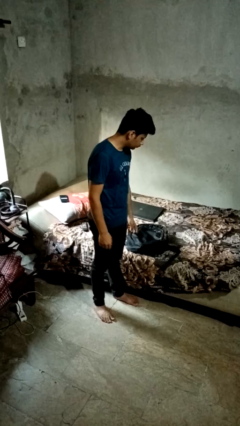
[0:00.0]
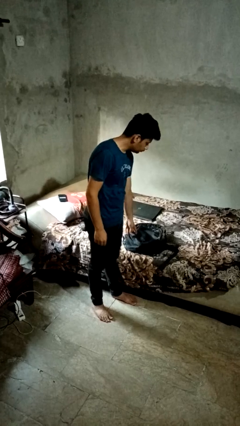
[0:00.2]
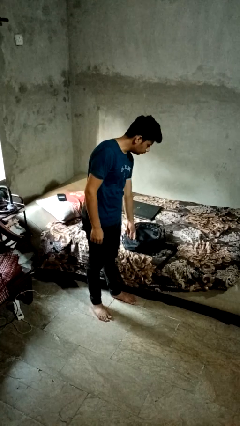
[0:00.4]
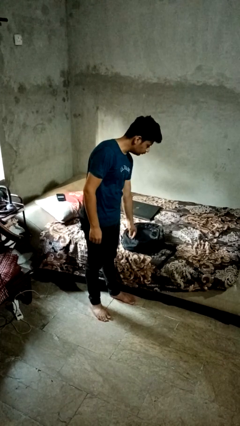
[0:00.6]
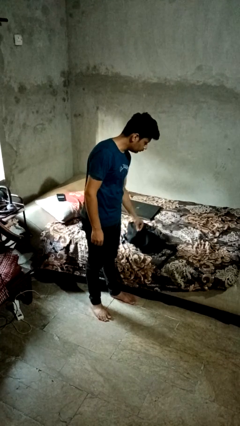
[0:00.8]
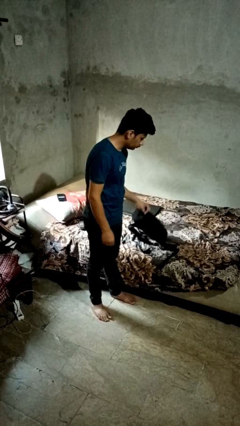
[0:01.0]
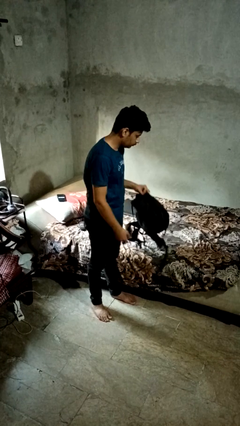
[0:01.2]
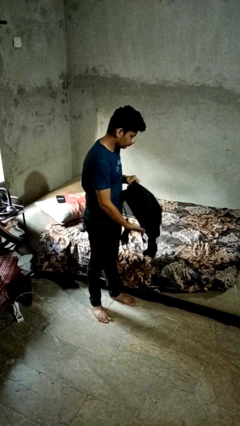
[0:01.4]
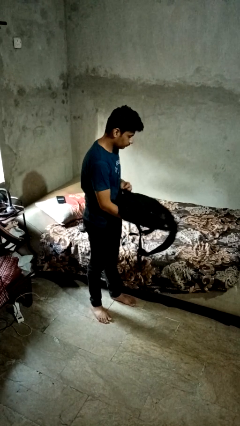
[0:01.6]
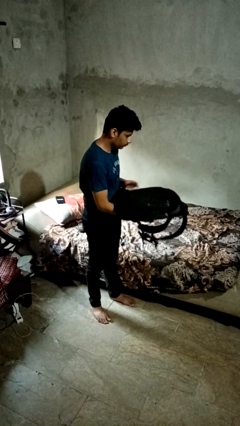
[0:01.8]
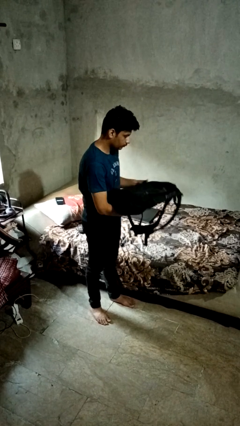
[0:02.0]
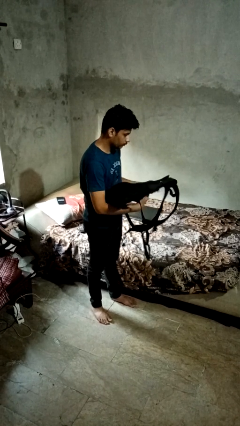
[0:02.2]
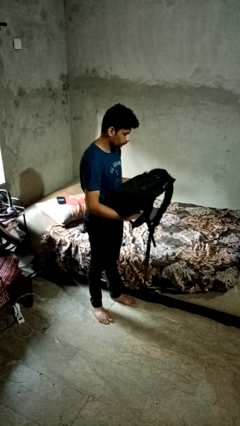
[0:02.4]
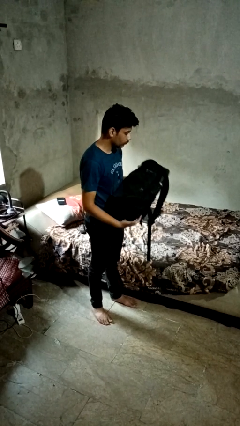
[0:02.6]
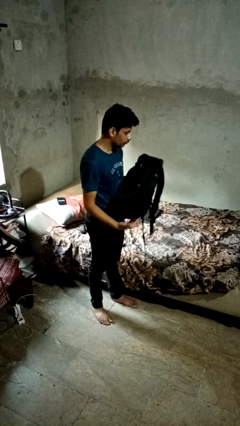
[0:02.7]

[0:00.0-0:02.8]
person picks up object from bed

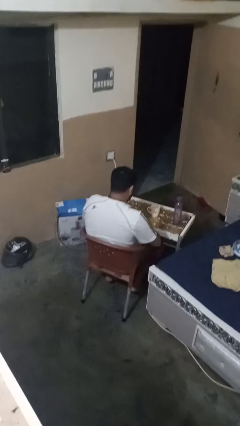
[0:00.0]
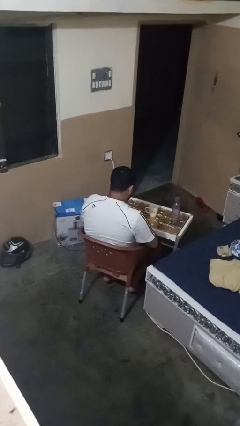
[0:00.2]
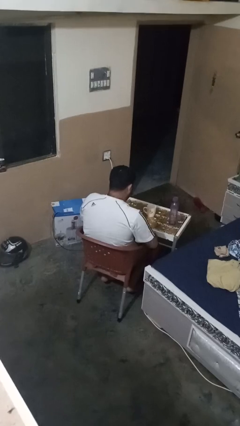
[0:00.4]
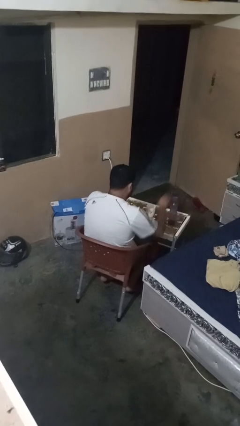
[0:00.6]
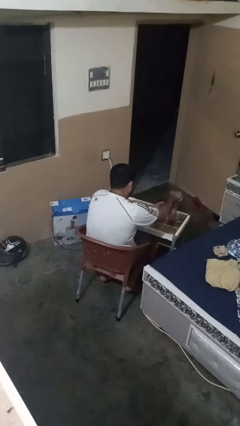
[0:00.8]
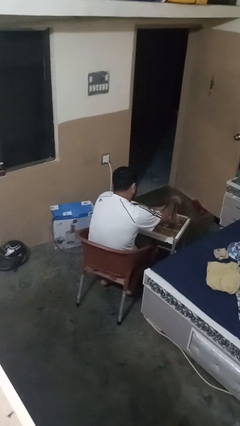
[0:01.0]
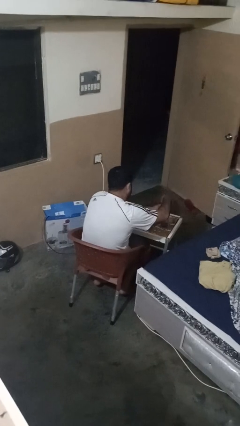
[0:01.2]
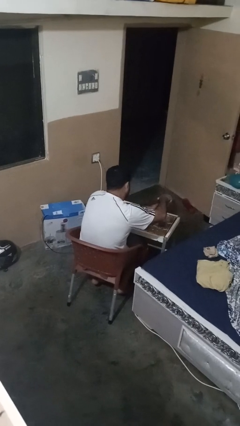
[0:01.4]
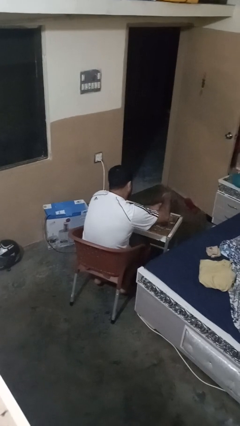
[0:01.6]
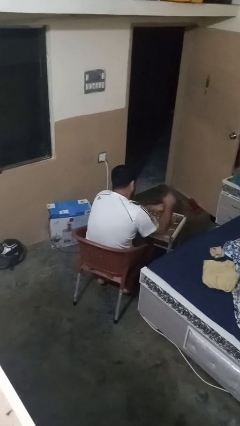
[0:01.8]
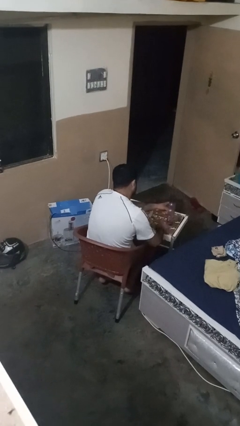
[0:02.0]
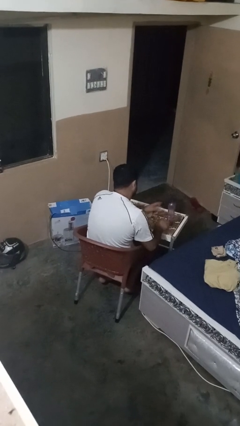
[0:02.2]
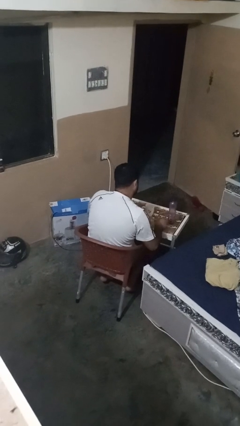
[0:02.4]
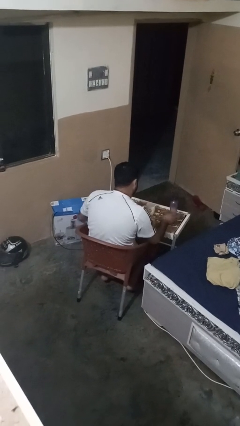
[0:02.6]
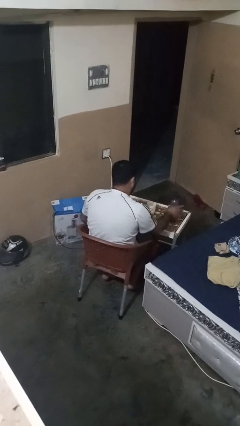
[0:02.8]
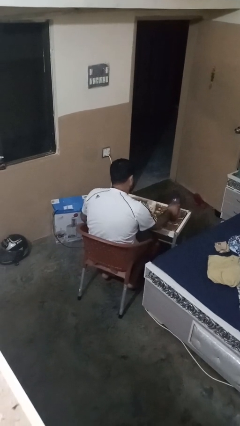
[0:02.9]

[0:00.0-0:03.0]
person unscrews lid from bottle

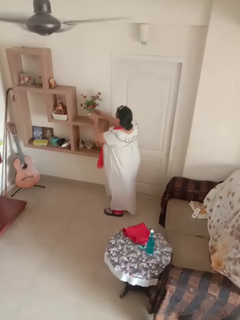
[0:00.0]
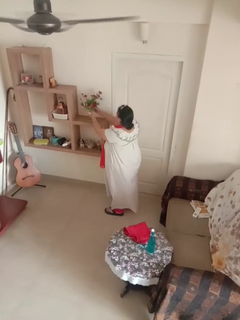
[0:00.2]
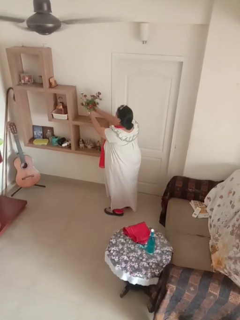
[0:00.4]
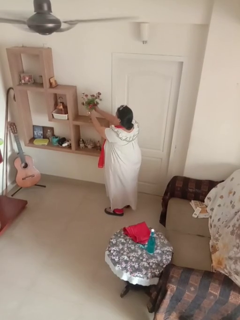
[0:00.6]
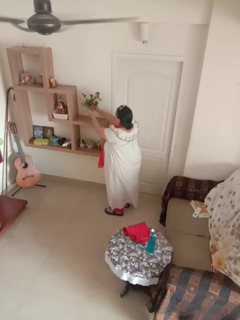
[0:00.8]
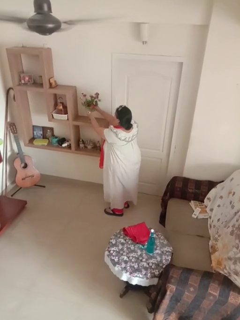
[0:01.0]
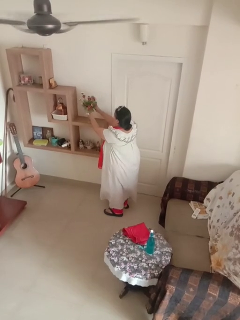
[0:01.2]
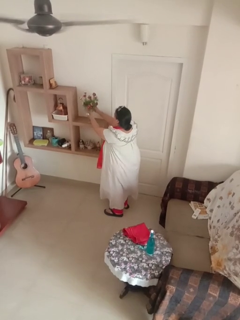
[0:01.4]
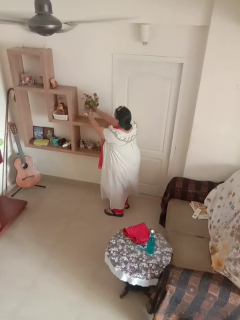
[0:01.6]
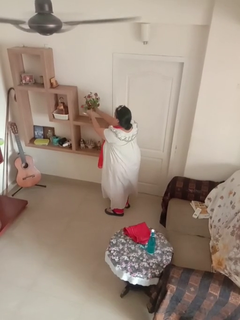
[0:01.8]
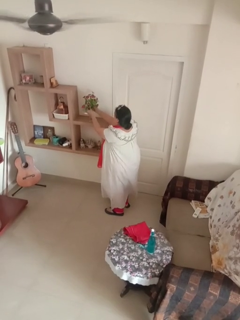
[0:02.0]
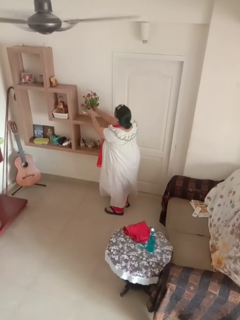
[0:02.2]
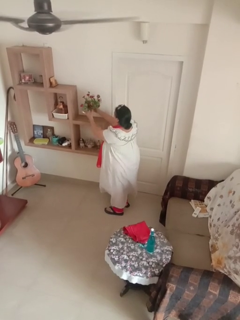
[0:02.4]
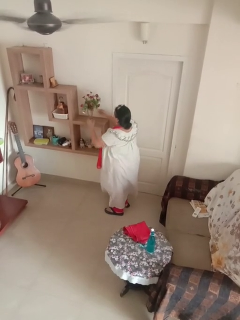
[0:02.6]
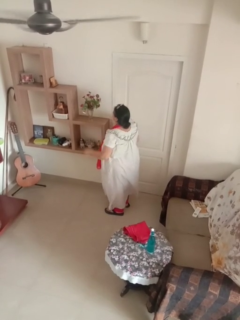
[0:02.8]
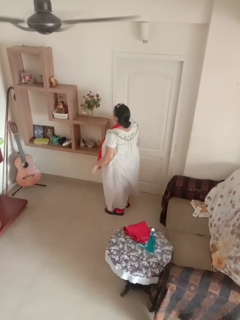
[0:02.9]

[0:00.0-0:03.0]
person arranges flowers in vase

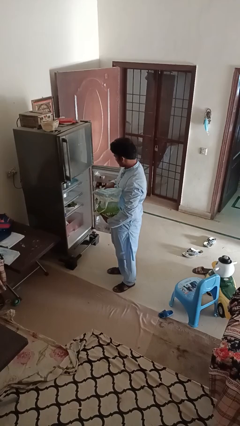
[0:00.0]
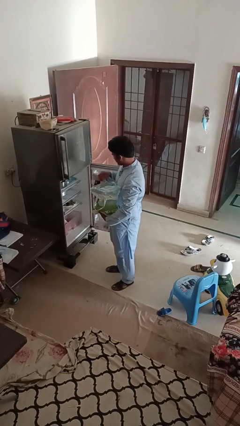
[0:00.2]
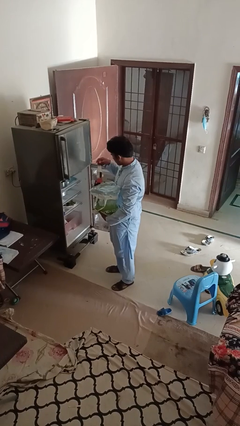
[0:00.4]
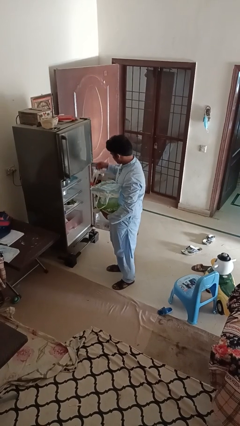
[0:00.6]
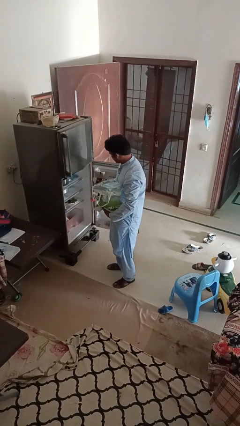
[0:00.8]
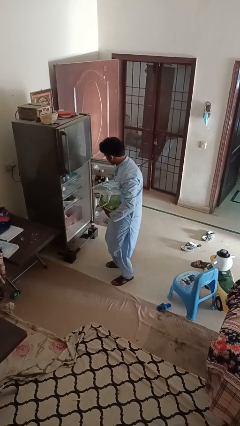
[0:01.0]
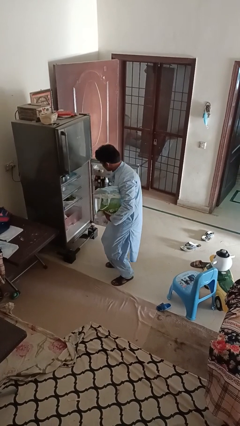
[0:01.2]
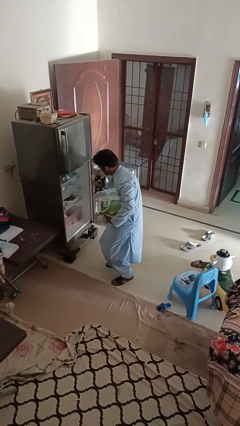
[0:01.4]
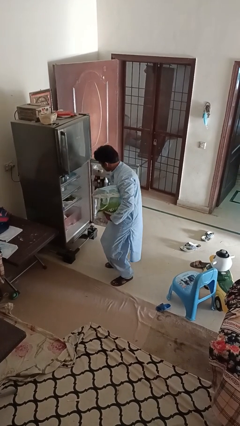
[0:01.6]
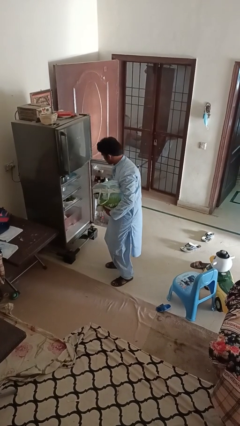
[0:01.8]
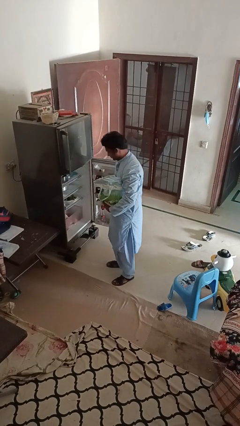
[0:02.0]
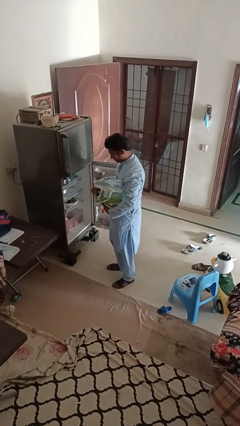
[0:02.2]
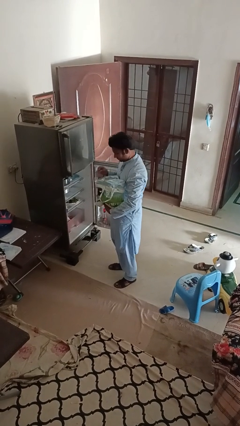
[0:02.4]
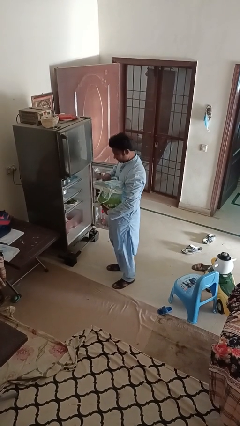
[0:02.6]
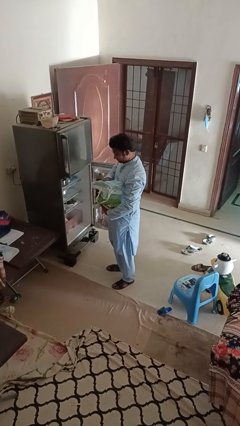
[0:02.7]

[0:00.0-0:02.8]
person loads groceries into refrigerator

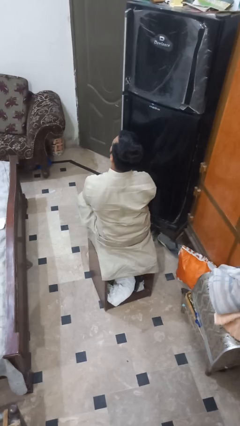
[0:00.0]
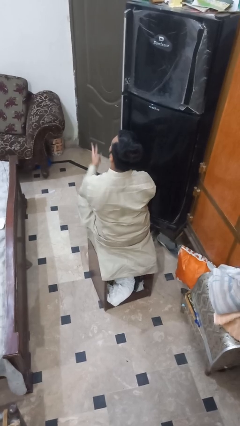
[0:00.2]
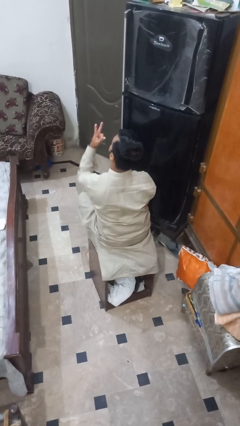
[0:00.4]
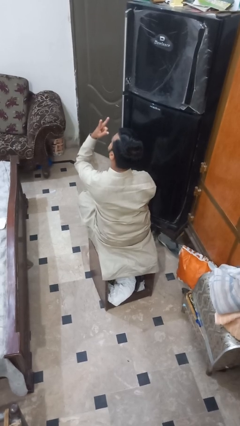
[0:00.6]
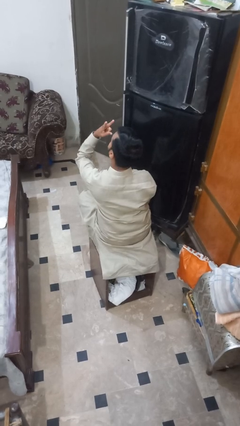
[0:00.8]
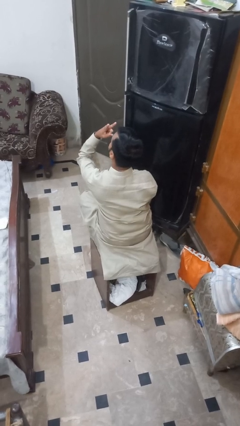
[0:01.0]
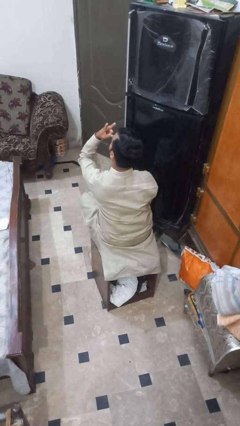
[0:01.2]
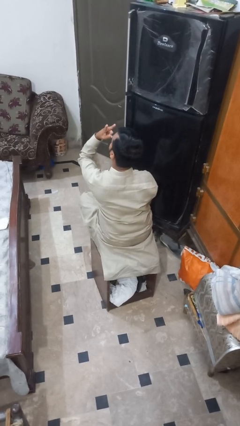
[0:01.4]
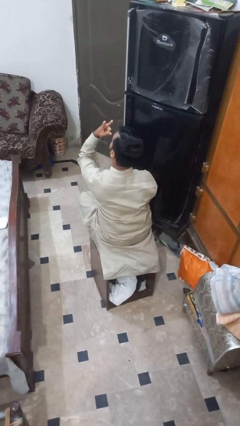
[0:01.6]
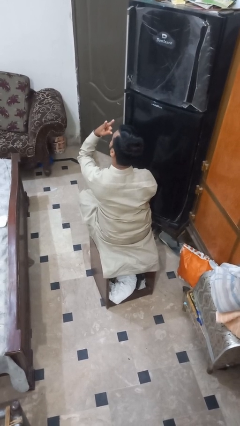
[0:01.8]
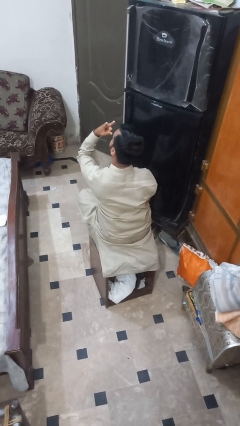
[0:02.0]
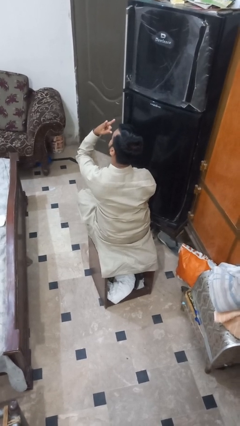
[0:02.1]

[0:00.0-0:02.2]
person gestures watch closely

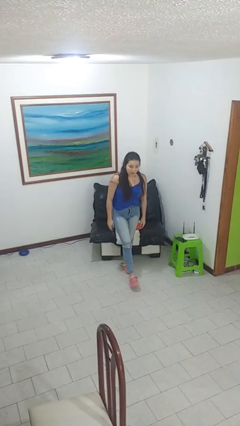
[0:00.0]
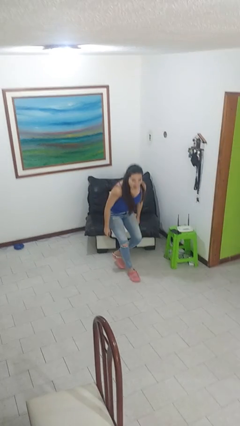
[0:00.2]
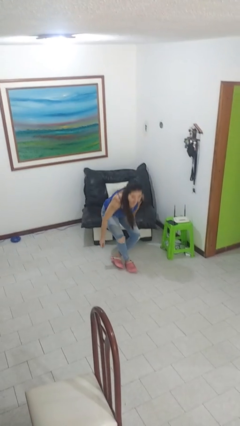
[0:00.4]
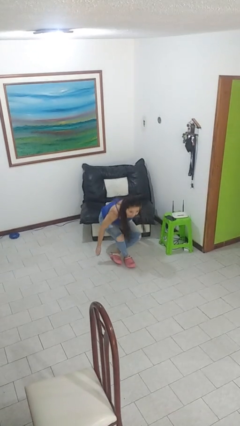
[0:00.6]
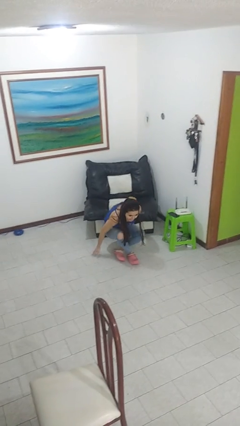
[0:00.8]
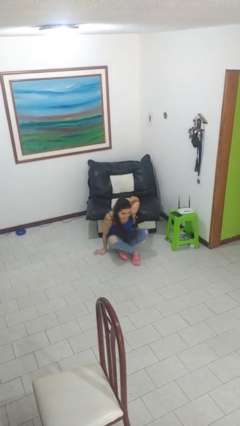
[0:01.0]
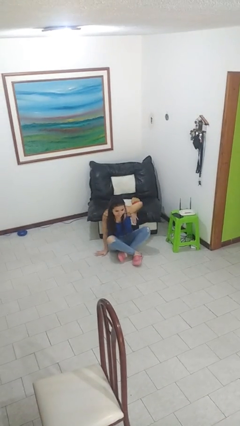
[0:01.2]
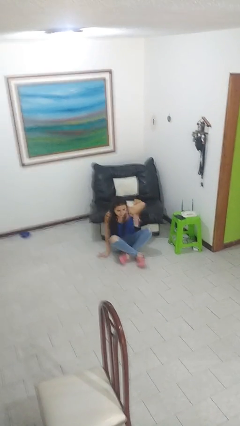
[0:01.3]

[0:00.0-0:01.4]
person sits crisscross

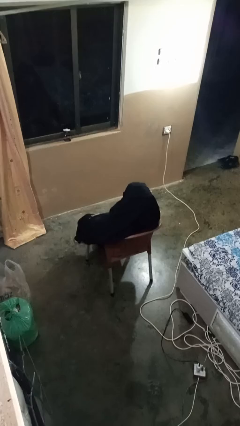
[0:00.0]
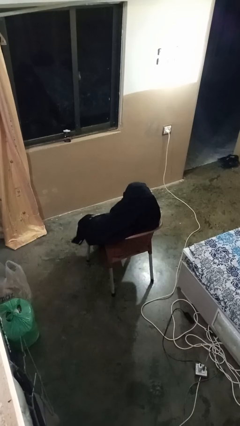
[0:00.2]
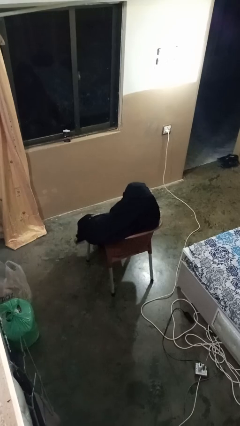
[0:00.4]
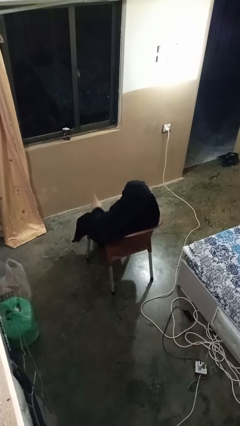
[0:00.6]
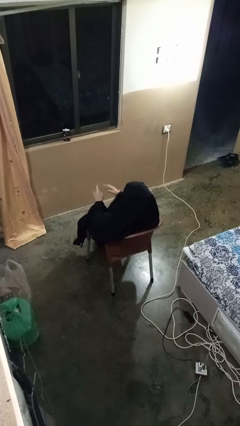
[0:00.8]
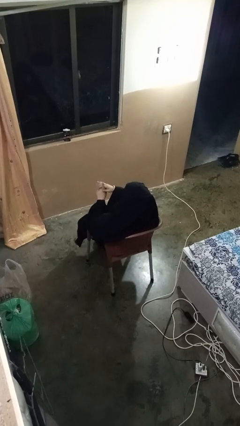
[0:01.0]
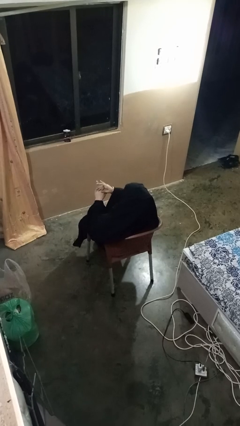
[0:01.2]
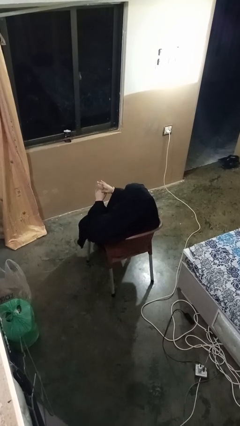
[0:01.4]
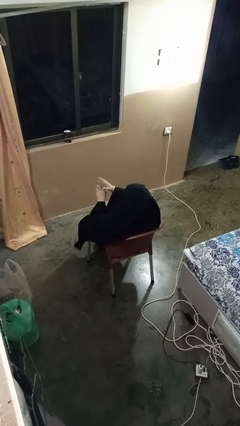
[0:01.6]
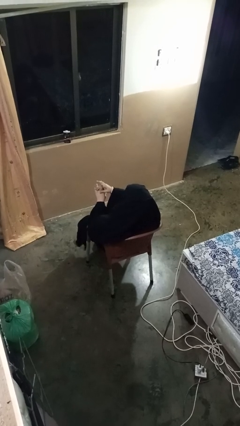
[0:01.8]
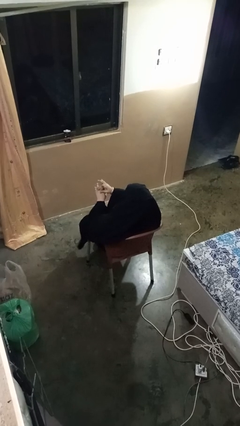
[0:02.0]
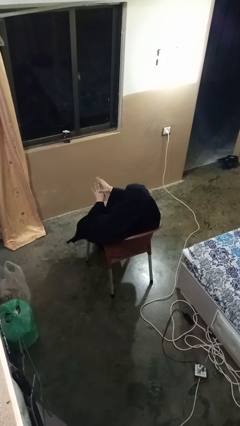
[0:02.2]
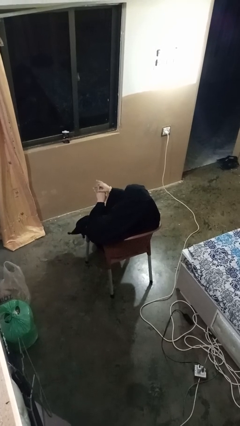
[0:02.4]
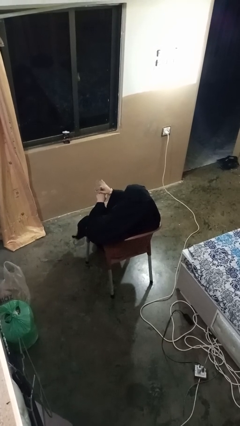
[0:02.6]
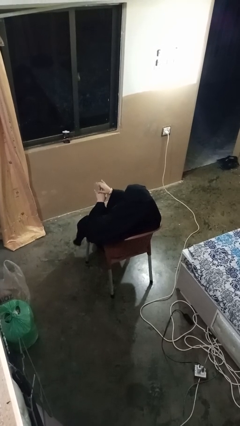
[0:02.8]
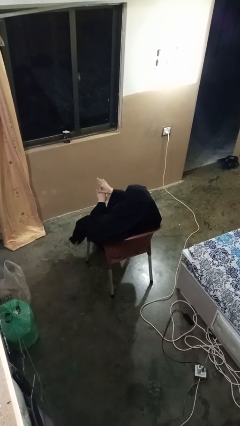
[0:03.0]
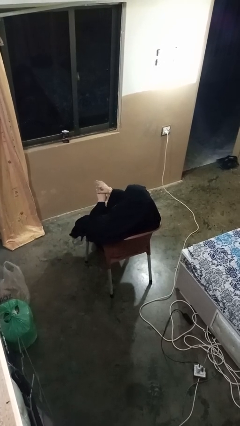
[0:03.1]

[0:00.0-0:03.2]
person cracks knuckles
